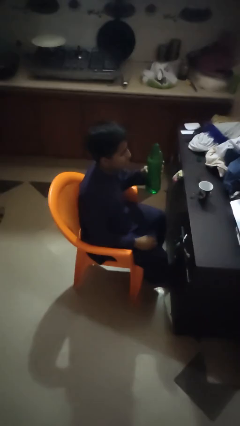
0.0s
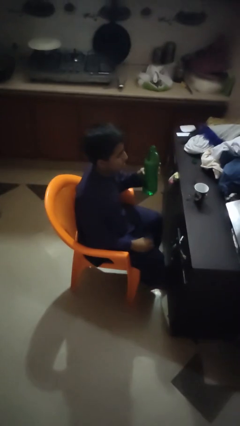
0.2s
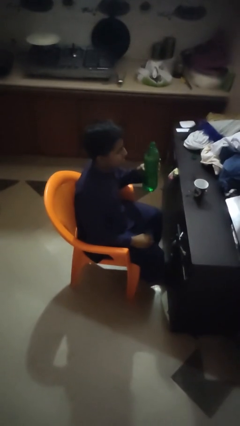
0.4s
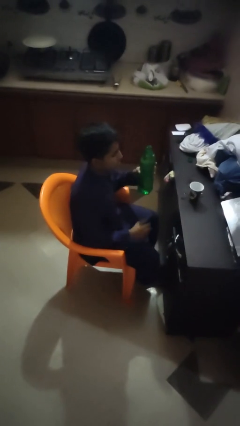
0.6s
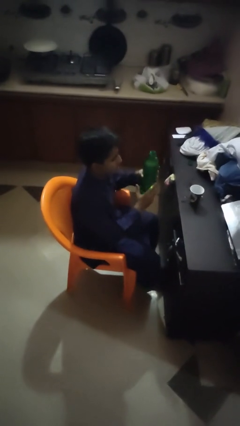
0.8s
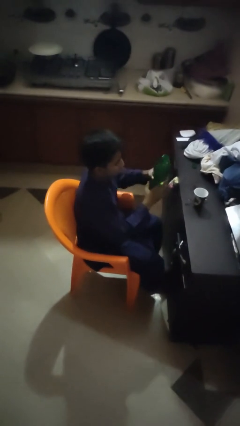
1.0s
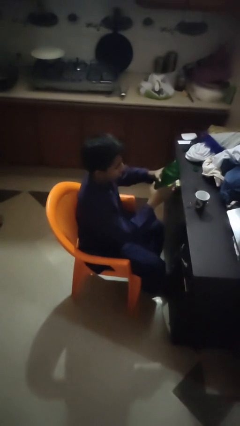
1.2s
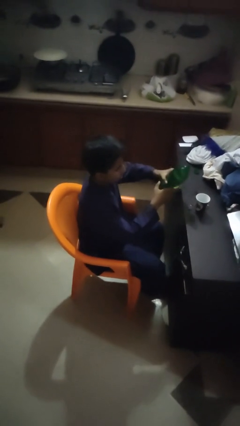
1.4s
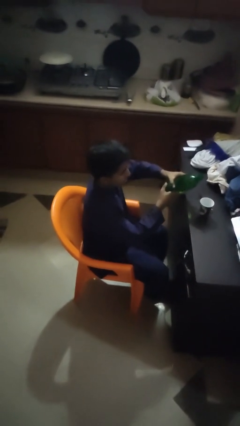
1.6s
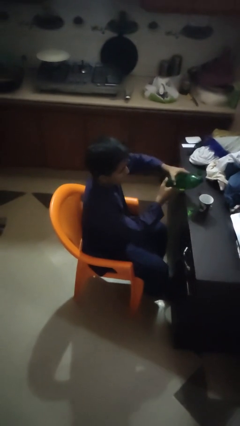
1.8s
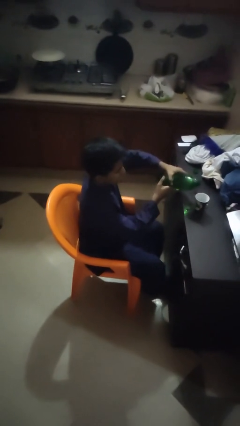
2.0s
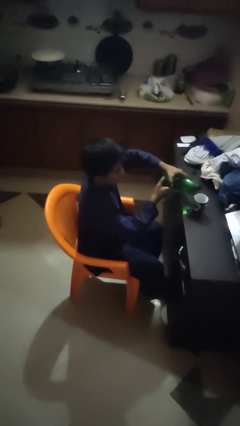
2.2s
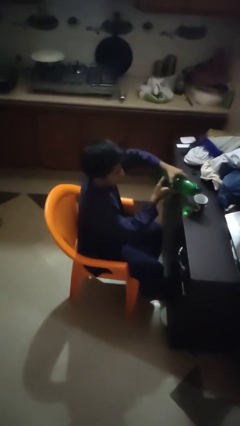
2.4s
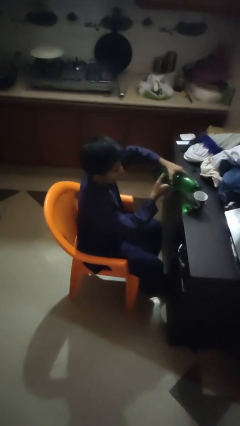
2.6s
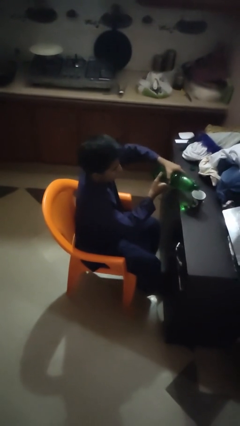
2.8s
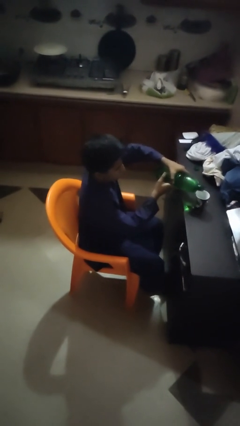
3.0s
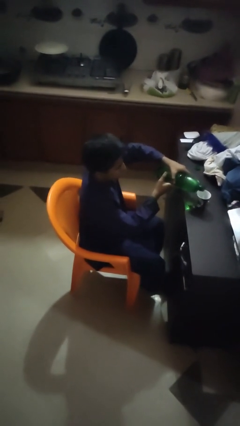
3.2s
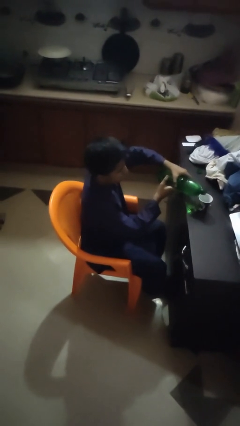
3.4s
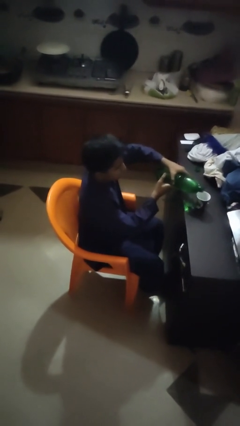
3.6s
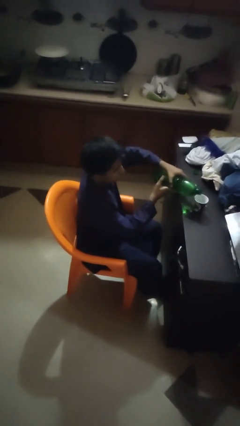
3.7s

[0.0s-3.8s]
person pours liquid into cup

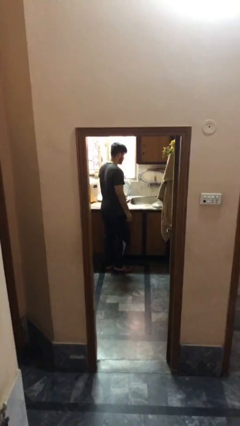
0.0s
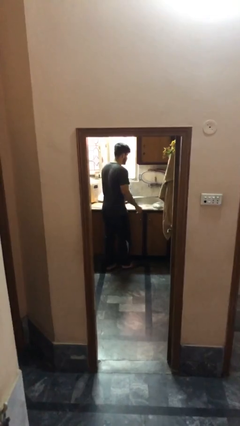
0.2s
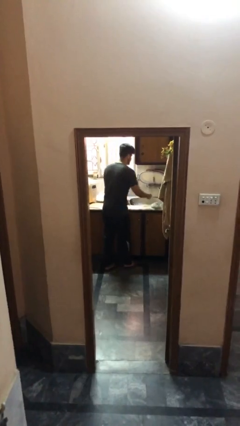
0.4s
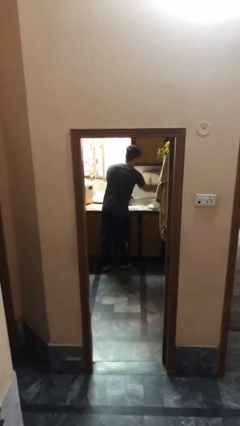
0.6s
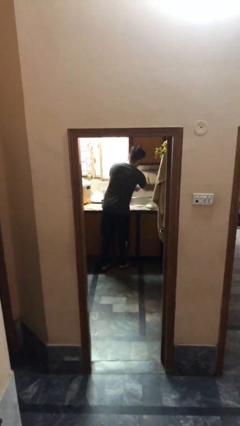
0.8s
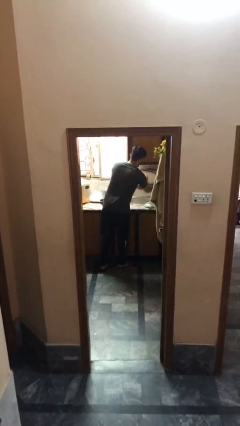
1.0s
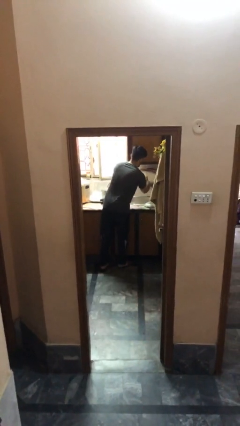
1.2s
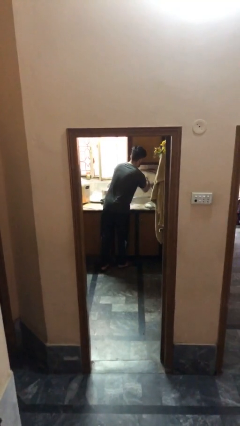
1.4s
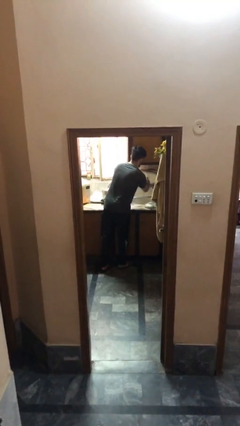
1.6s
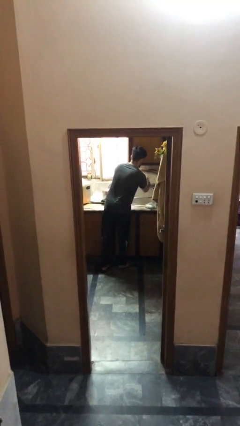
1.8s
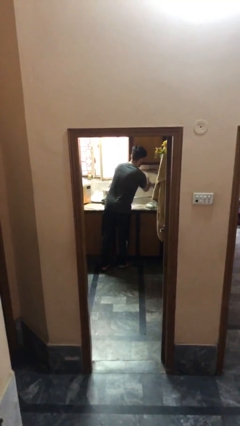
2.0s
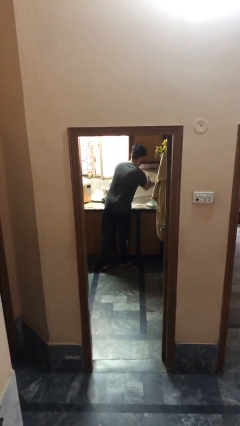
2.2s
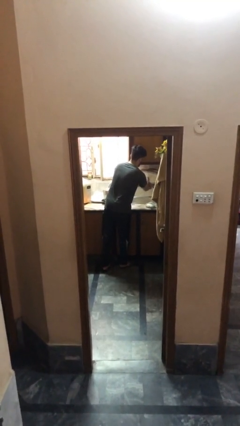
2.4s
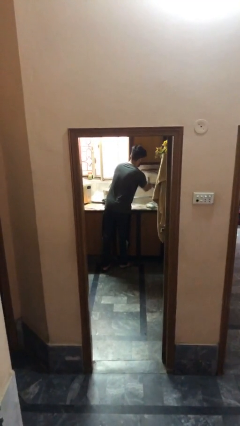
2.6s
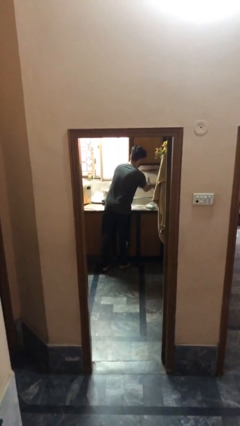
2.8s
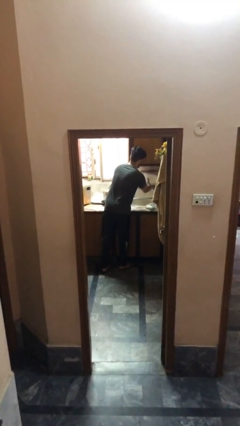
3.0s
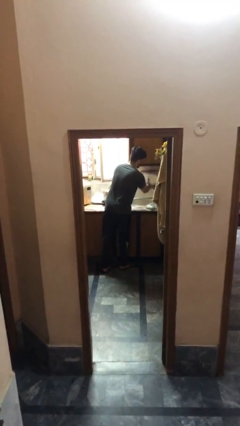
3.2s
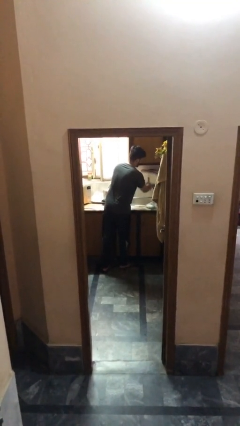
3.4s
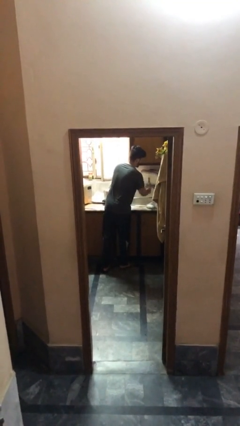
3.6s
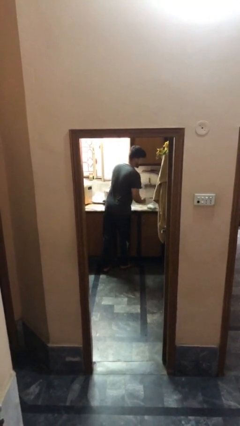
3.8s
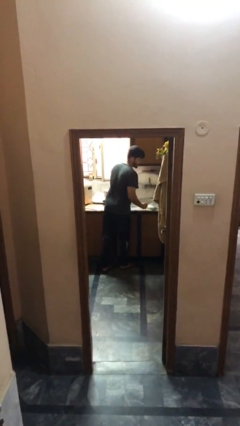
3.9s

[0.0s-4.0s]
person washes hands

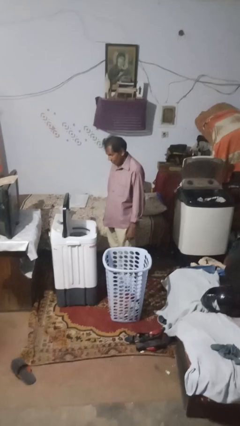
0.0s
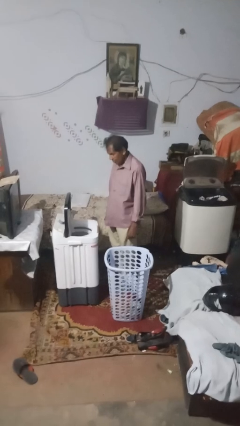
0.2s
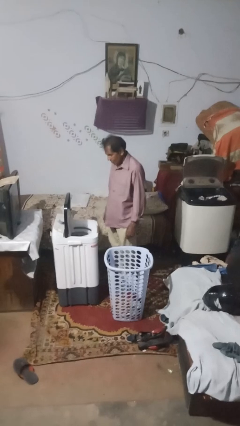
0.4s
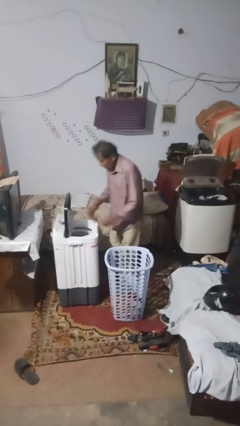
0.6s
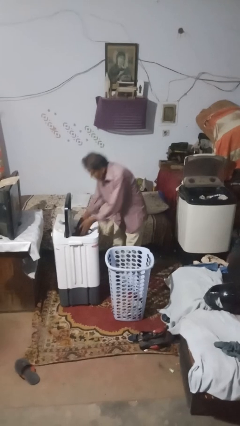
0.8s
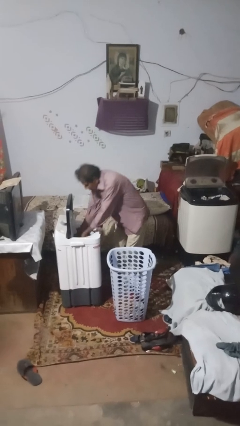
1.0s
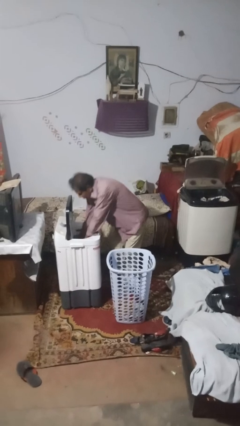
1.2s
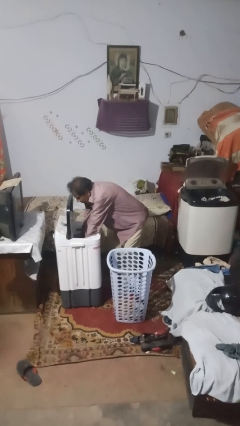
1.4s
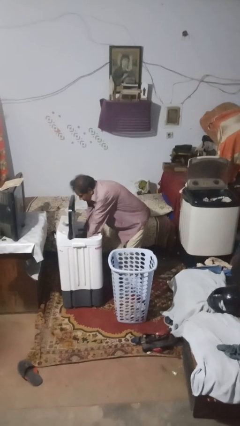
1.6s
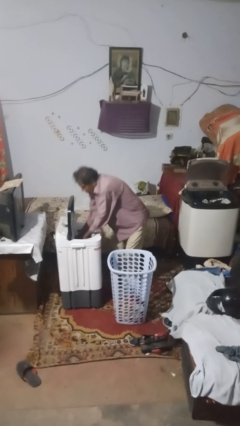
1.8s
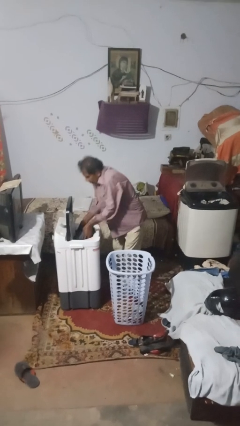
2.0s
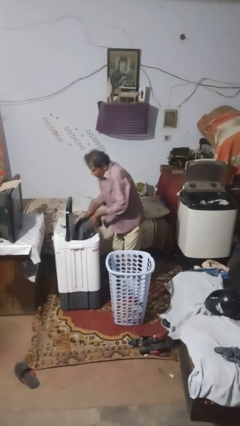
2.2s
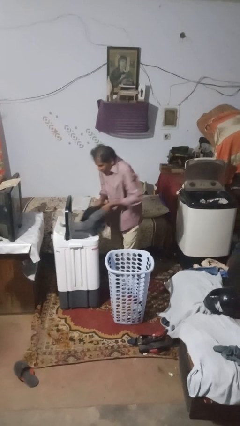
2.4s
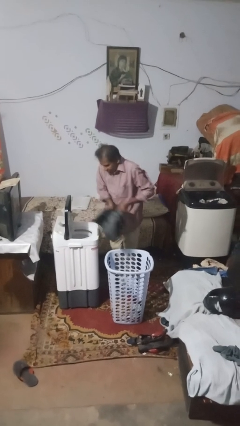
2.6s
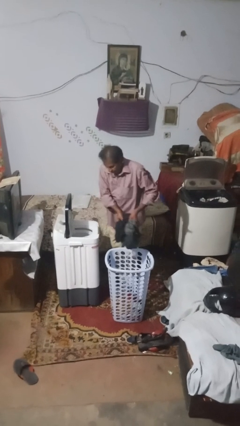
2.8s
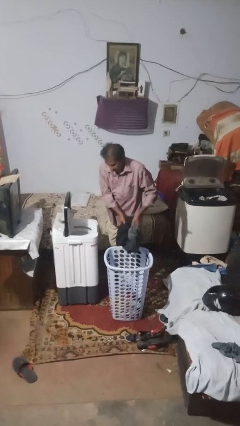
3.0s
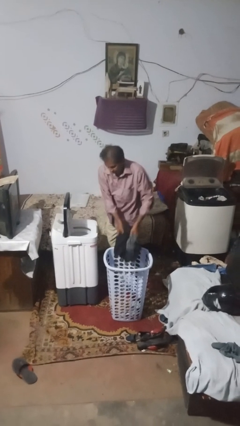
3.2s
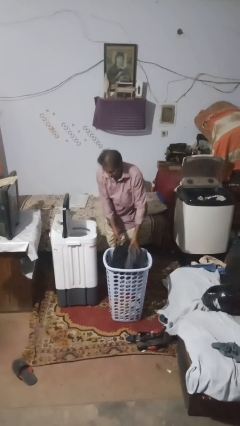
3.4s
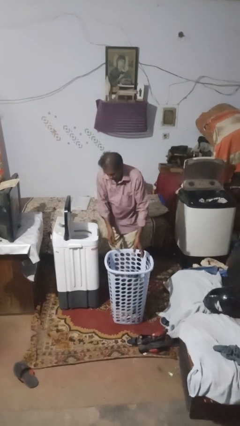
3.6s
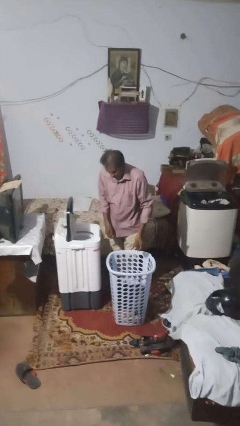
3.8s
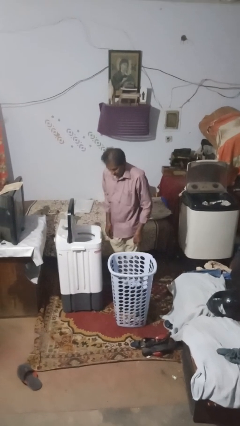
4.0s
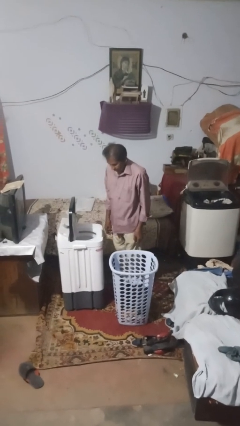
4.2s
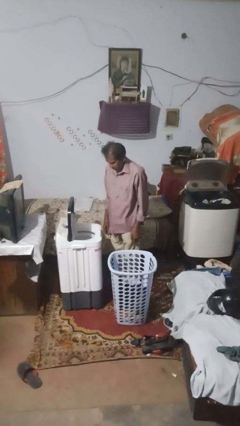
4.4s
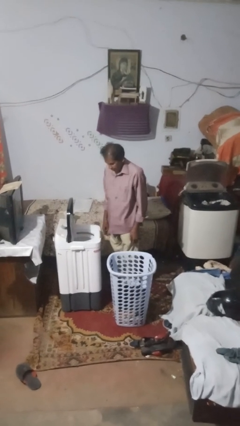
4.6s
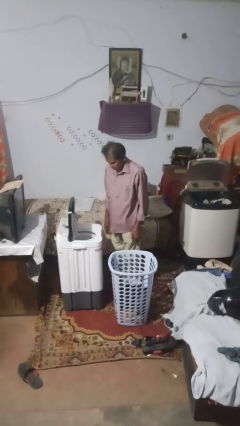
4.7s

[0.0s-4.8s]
person loads dryer

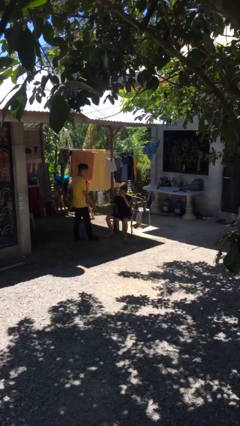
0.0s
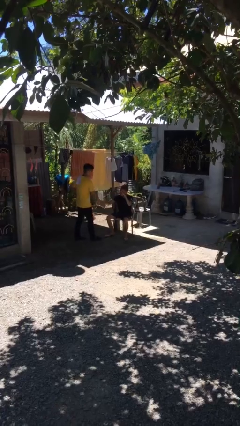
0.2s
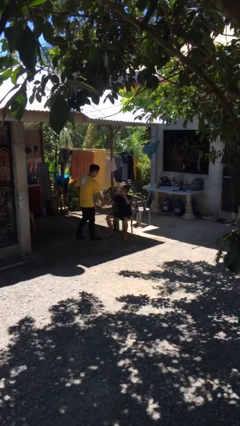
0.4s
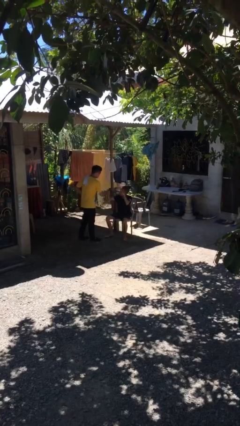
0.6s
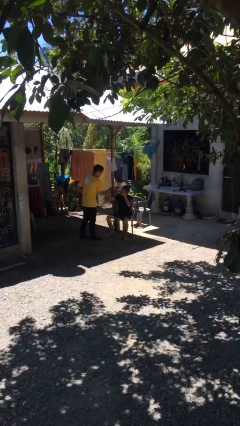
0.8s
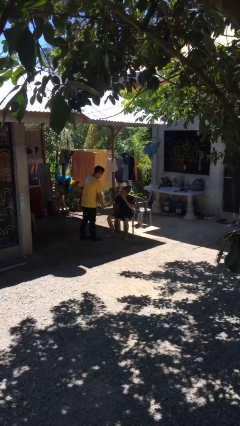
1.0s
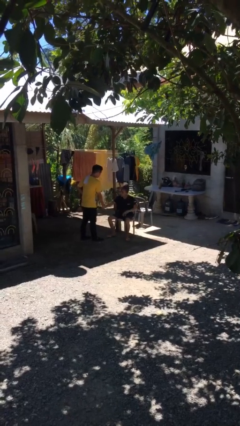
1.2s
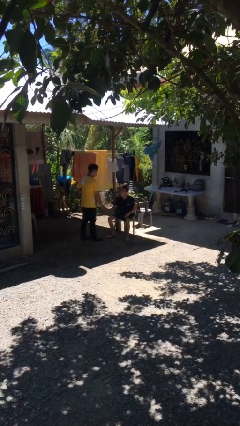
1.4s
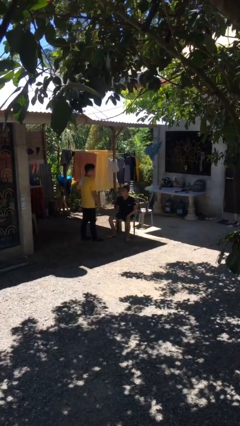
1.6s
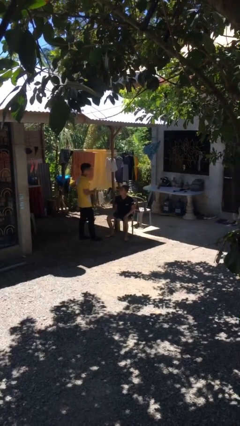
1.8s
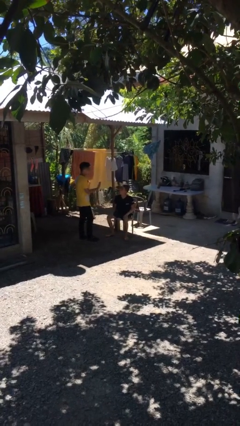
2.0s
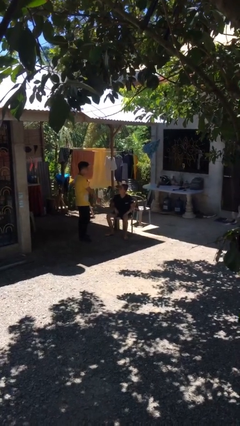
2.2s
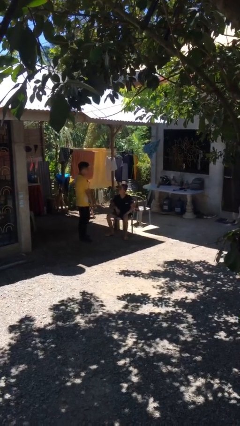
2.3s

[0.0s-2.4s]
person shakes hand

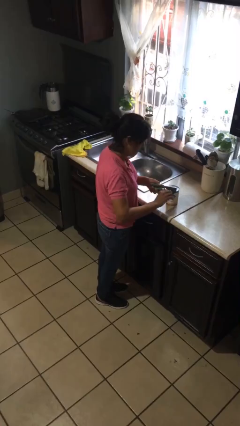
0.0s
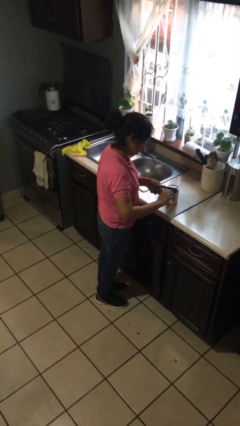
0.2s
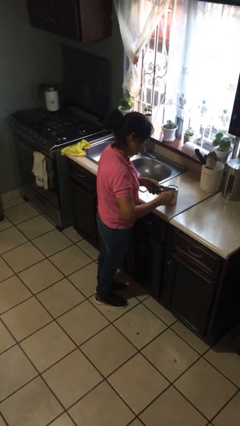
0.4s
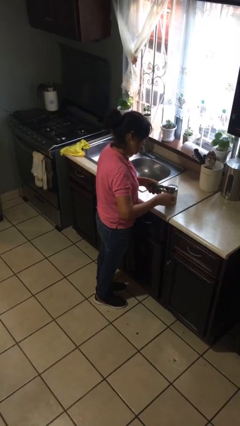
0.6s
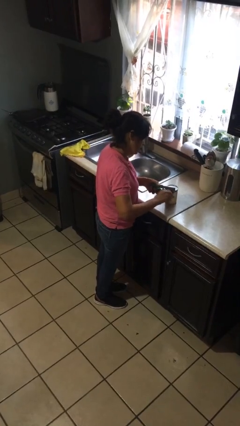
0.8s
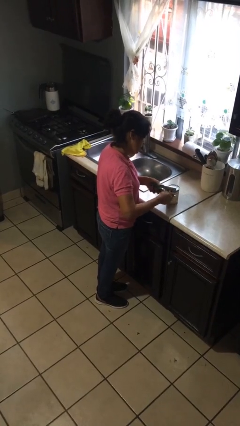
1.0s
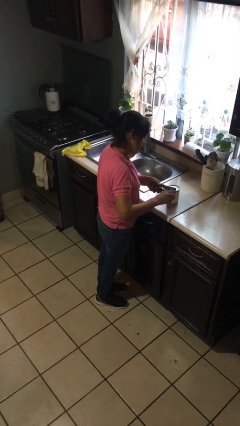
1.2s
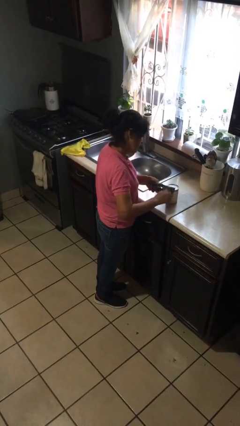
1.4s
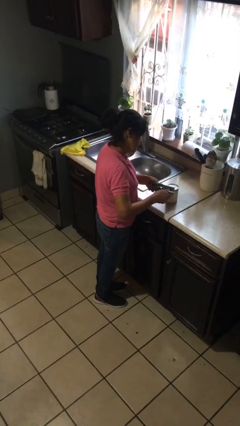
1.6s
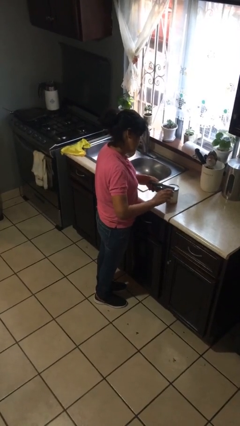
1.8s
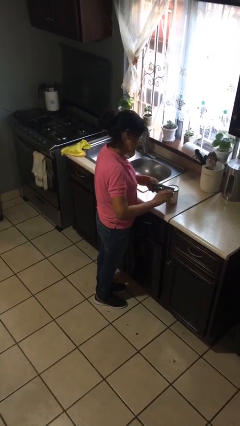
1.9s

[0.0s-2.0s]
person opens can with can opener

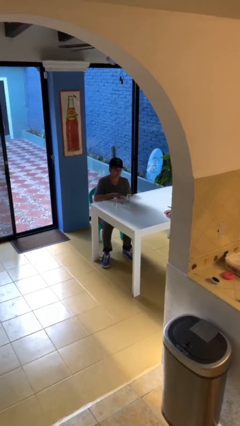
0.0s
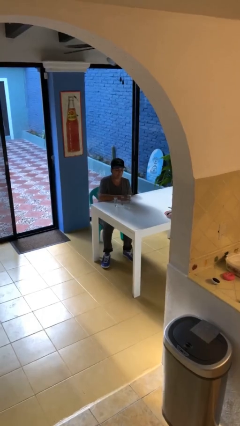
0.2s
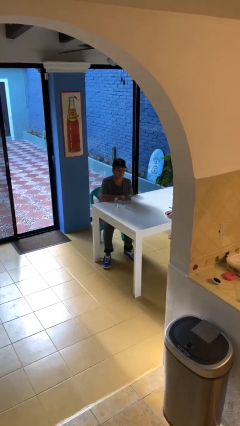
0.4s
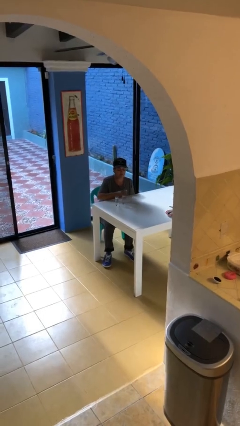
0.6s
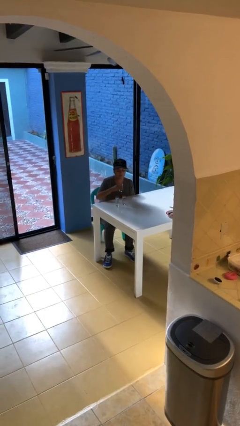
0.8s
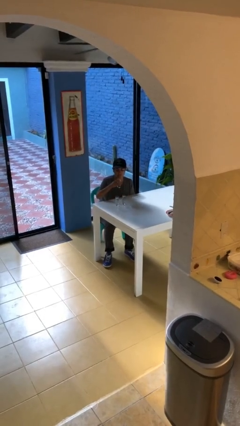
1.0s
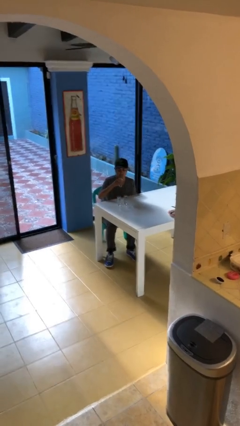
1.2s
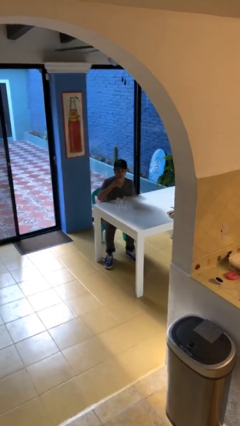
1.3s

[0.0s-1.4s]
person picks up object from table
